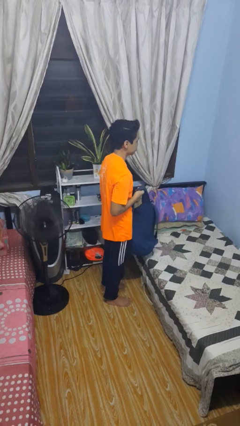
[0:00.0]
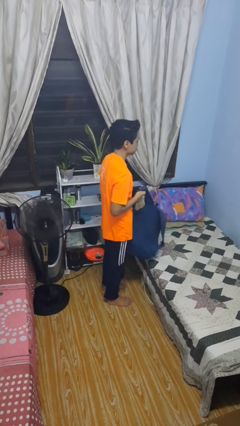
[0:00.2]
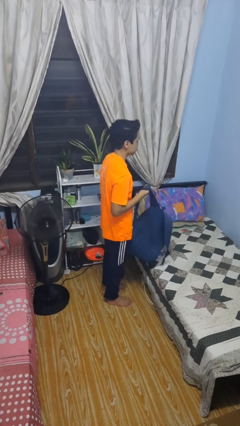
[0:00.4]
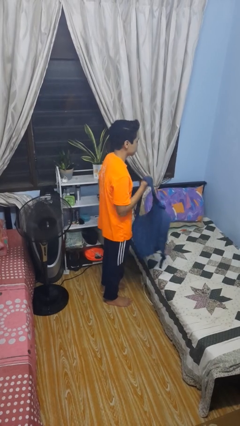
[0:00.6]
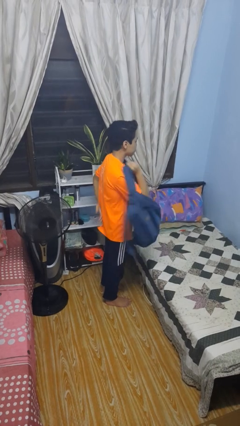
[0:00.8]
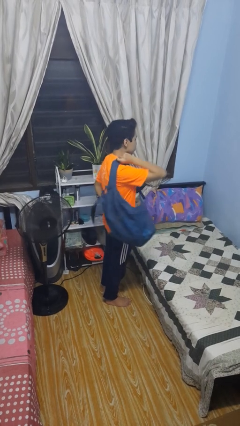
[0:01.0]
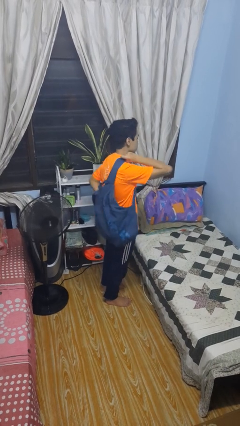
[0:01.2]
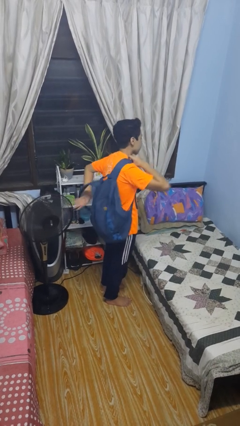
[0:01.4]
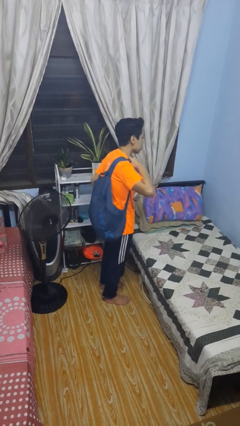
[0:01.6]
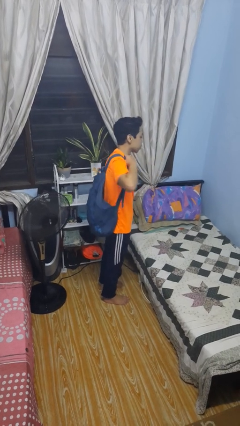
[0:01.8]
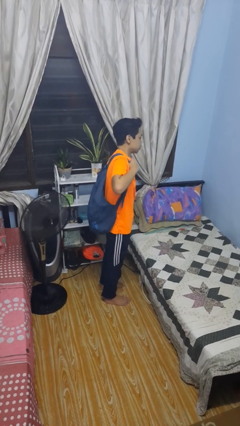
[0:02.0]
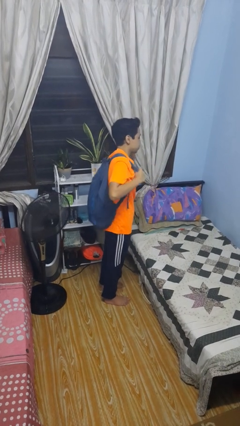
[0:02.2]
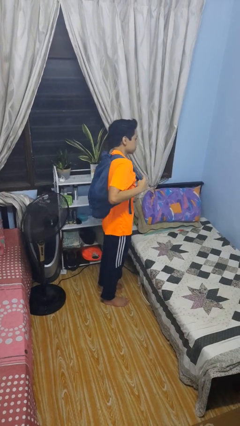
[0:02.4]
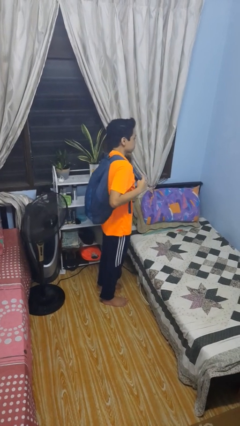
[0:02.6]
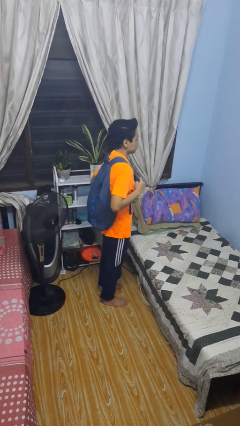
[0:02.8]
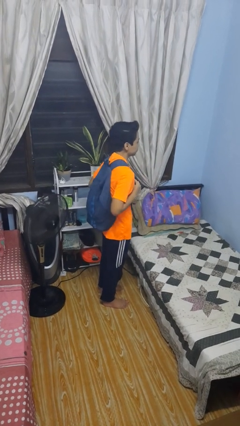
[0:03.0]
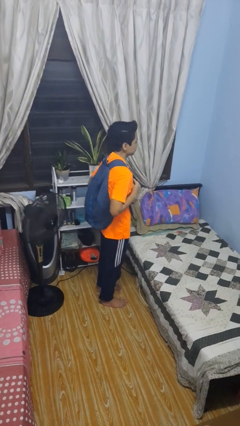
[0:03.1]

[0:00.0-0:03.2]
person puts on backpack

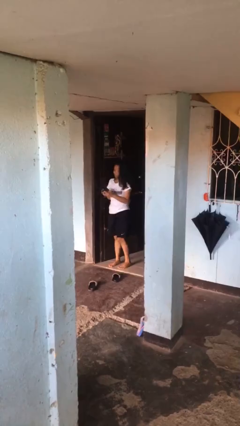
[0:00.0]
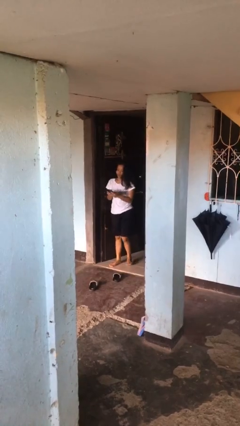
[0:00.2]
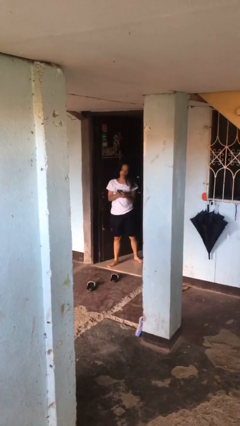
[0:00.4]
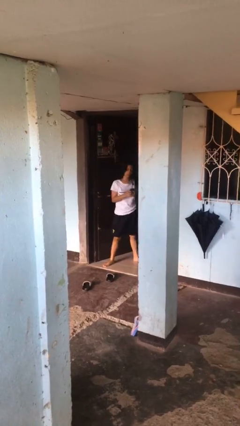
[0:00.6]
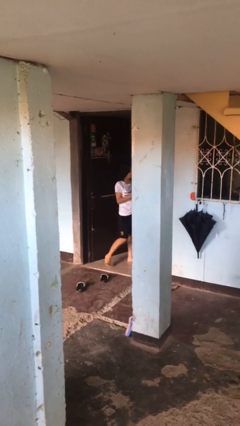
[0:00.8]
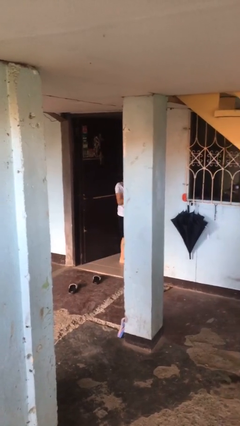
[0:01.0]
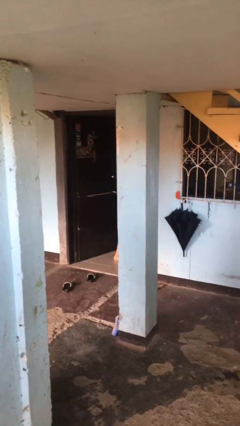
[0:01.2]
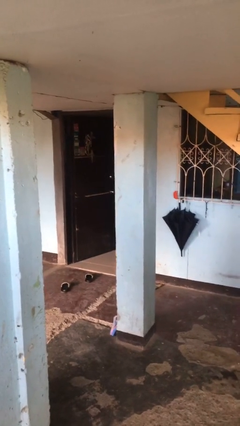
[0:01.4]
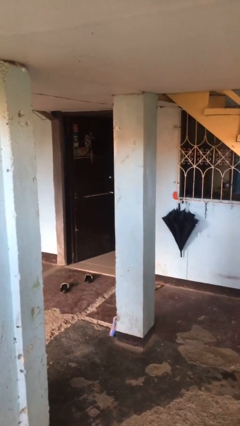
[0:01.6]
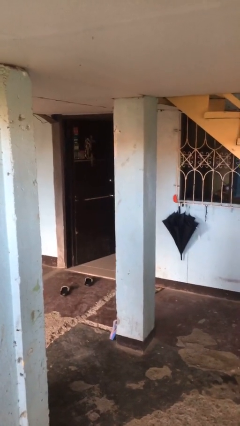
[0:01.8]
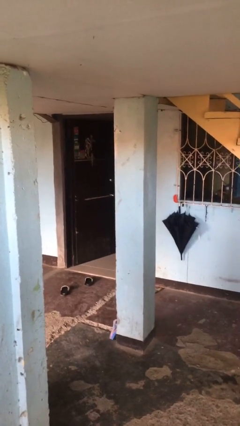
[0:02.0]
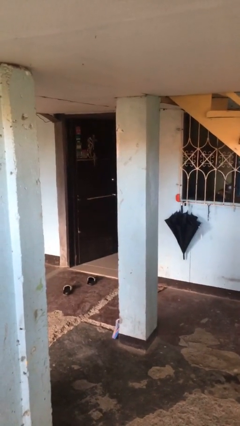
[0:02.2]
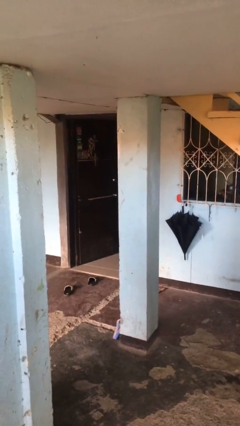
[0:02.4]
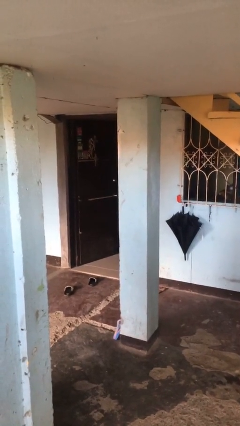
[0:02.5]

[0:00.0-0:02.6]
person exits scene through structure

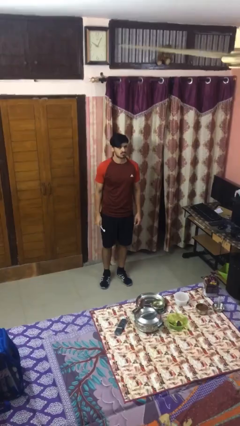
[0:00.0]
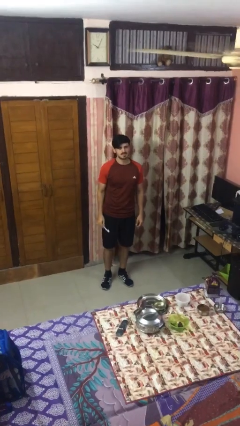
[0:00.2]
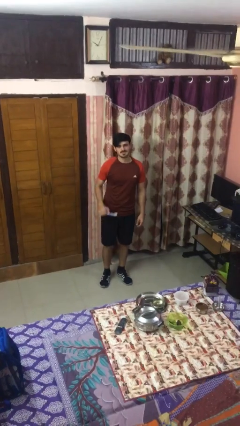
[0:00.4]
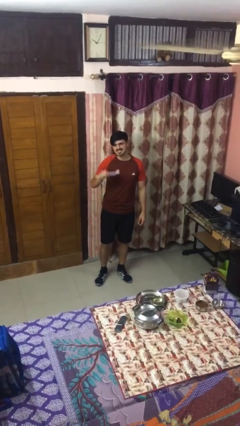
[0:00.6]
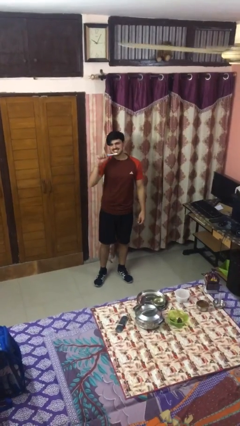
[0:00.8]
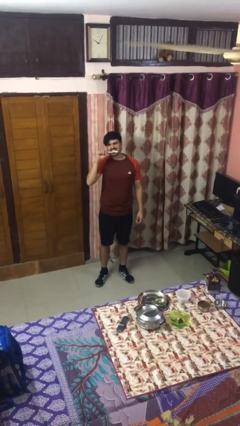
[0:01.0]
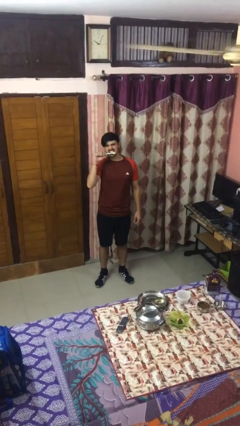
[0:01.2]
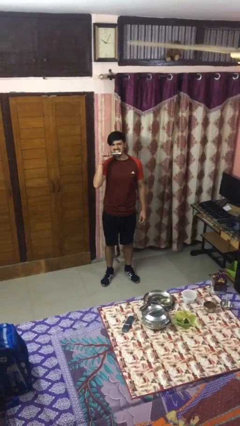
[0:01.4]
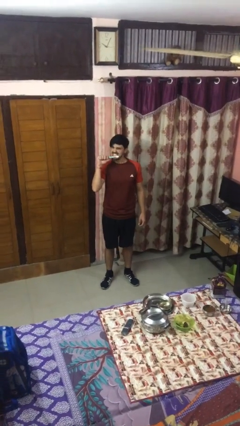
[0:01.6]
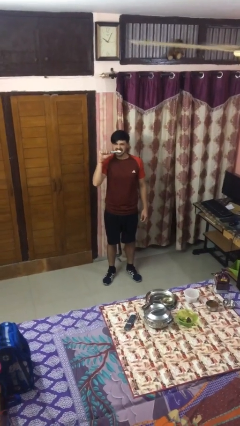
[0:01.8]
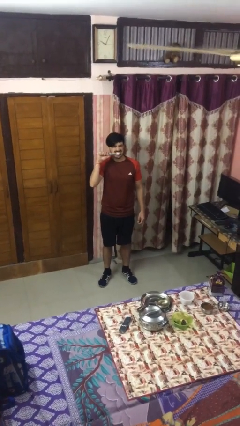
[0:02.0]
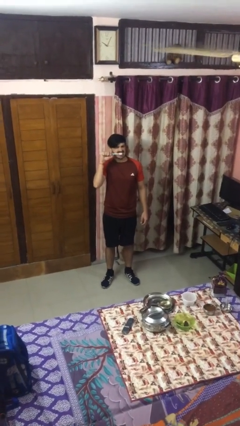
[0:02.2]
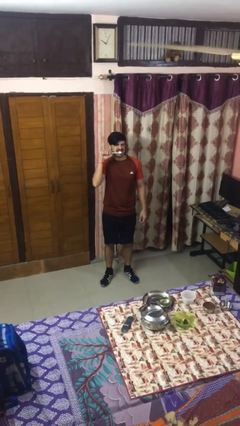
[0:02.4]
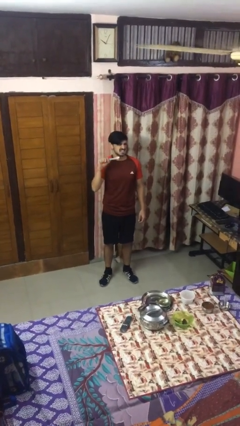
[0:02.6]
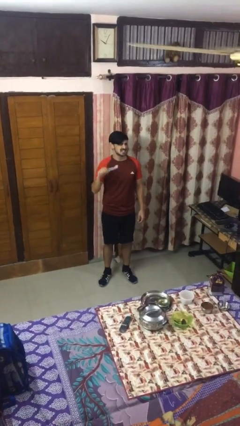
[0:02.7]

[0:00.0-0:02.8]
person brushes teeth

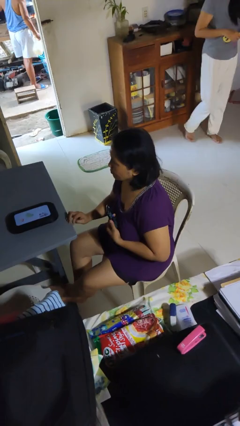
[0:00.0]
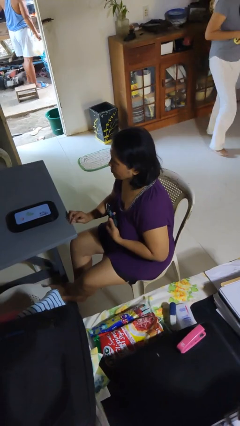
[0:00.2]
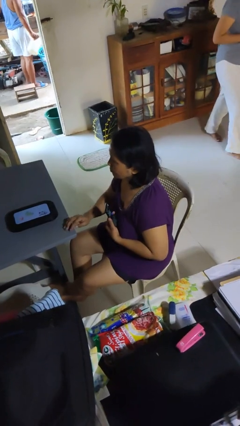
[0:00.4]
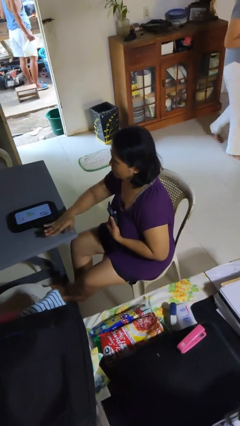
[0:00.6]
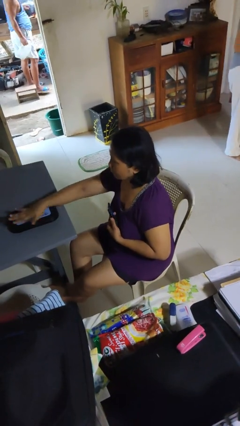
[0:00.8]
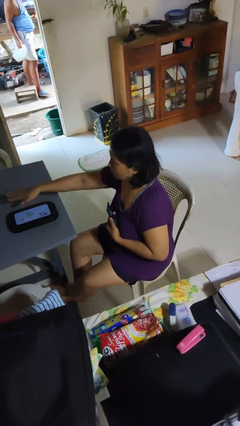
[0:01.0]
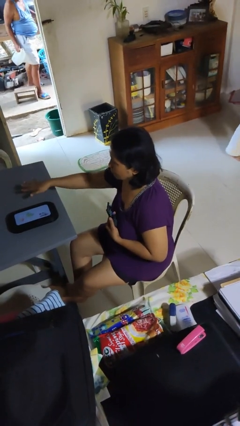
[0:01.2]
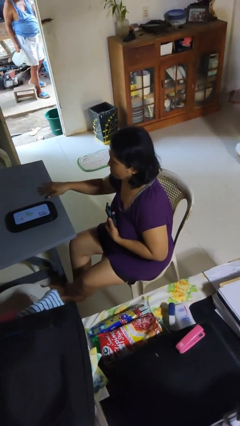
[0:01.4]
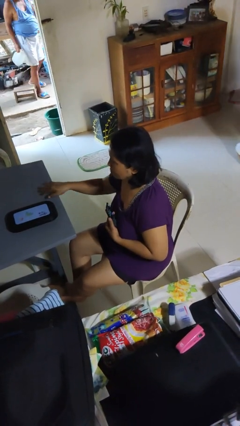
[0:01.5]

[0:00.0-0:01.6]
person waves hand over object

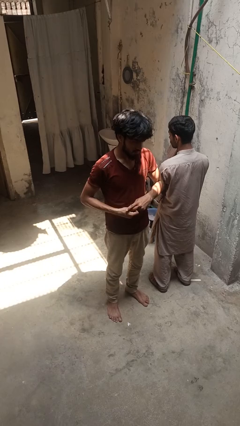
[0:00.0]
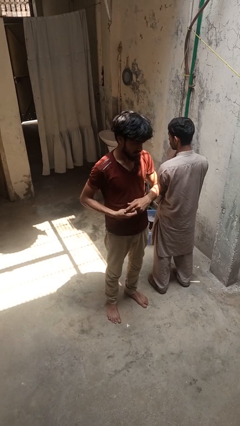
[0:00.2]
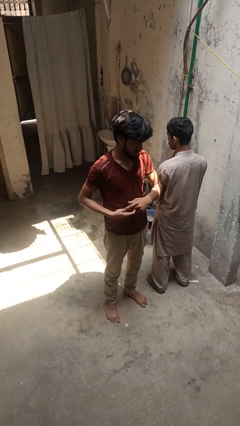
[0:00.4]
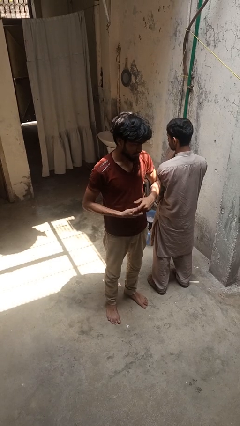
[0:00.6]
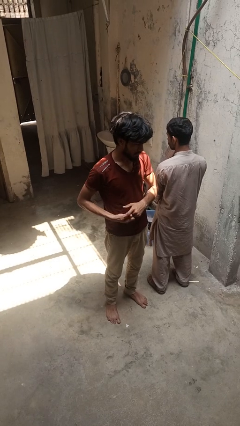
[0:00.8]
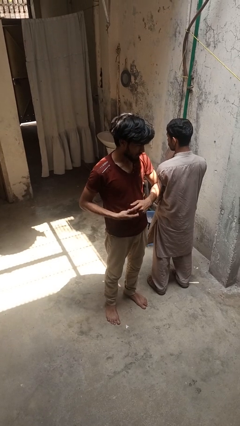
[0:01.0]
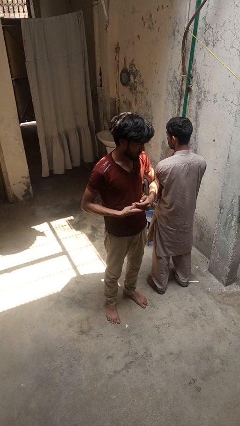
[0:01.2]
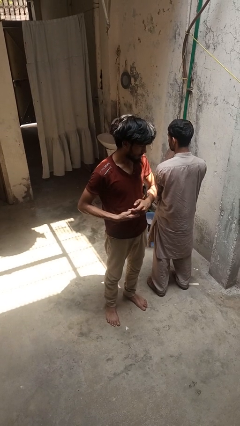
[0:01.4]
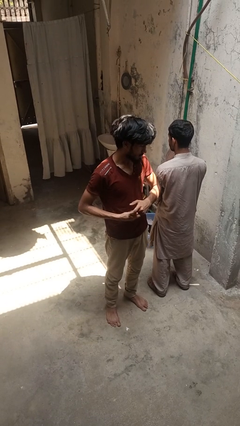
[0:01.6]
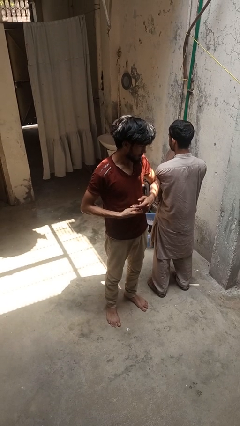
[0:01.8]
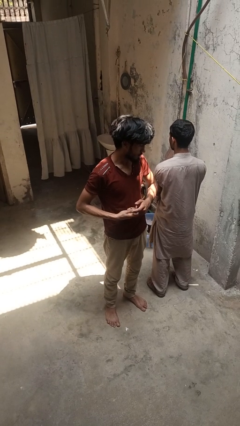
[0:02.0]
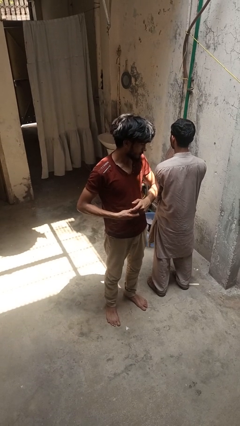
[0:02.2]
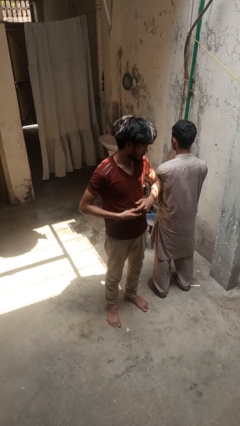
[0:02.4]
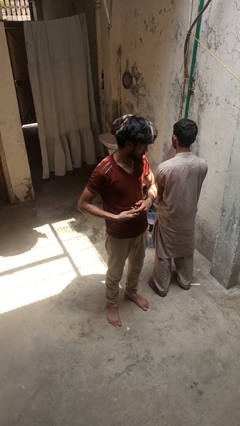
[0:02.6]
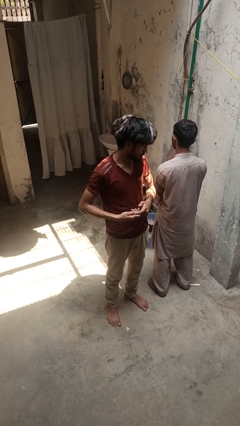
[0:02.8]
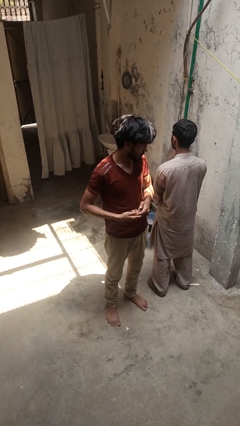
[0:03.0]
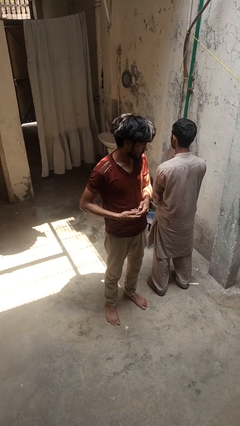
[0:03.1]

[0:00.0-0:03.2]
person nudges person with elbow

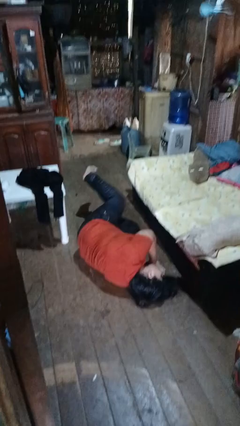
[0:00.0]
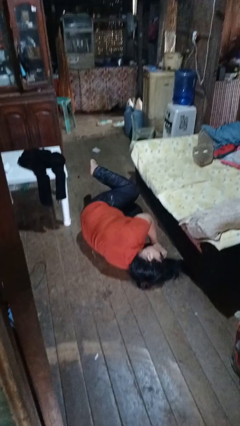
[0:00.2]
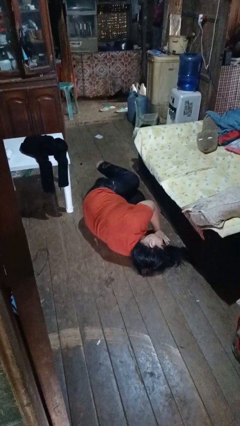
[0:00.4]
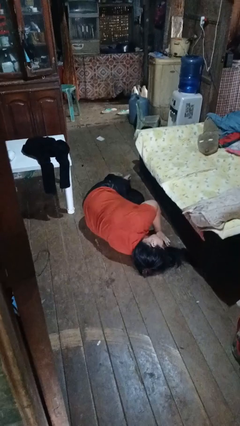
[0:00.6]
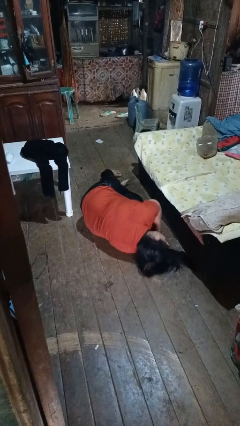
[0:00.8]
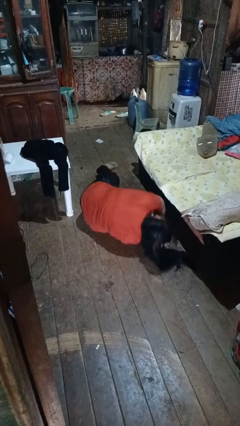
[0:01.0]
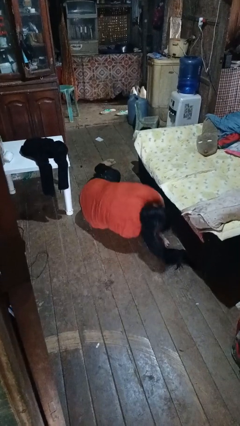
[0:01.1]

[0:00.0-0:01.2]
person lies down on floor

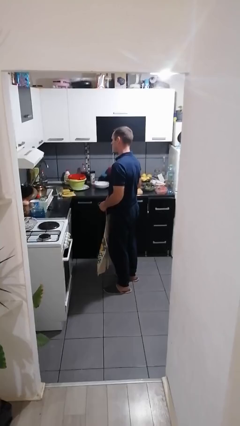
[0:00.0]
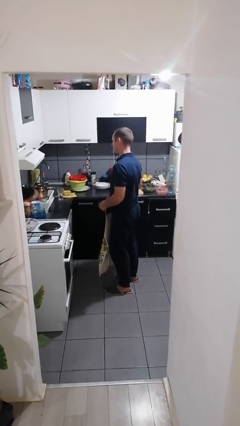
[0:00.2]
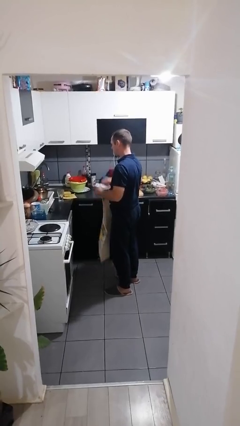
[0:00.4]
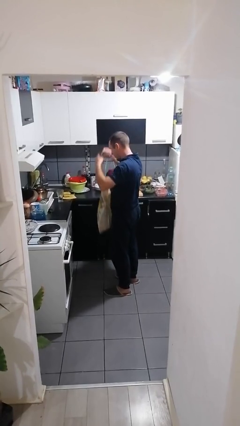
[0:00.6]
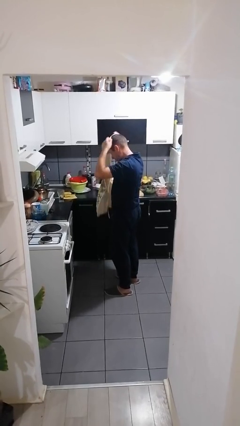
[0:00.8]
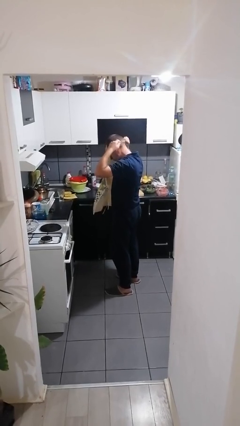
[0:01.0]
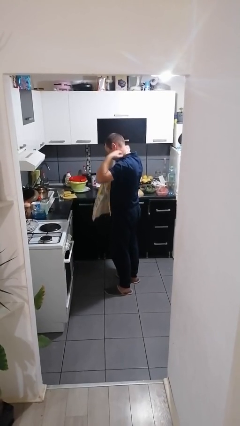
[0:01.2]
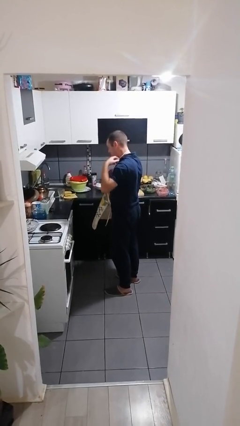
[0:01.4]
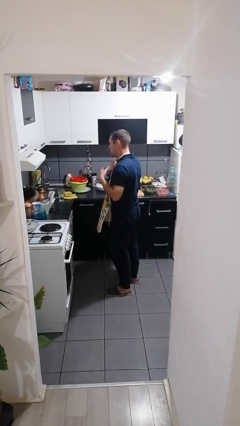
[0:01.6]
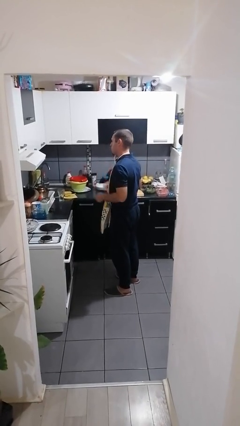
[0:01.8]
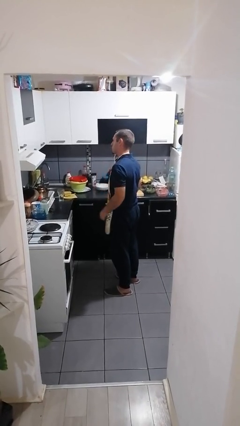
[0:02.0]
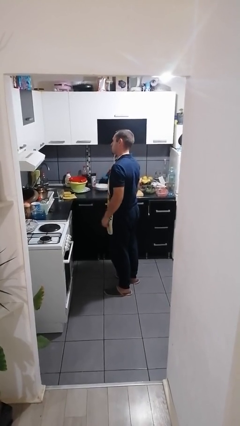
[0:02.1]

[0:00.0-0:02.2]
person puts on apron
